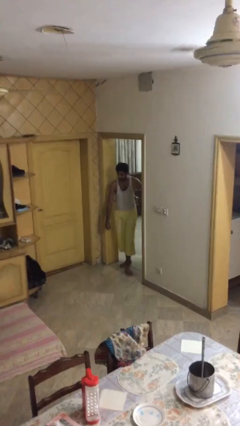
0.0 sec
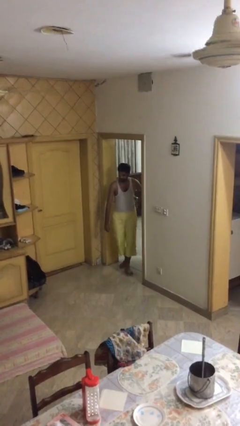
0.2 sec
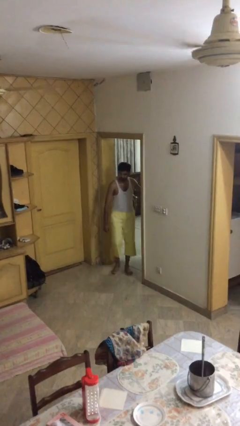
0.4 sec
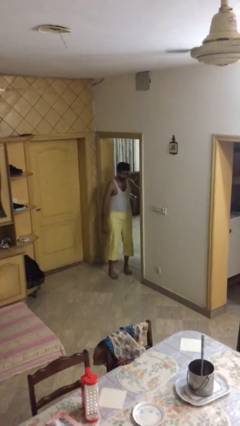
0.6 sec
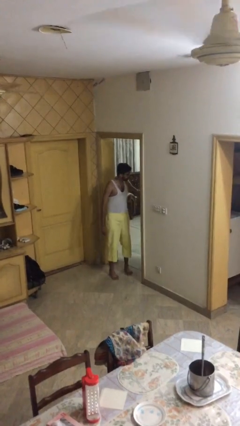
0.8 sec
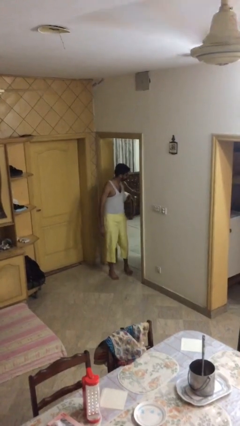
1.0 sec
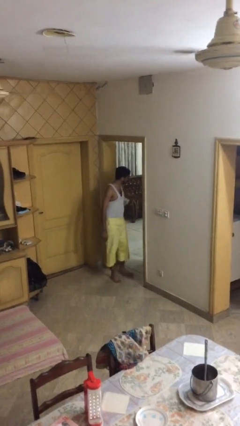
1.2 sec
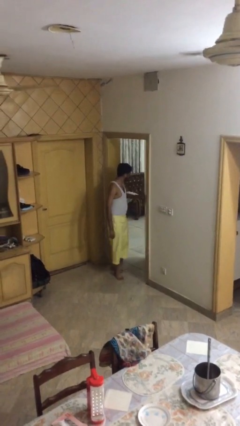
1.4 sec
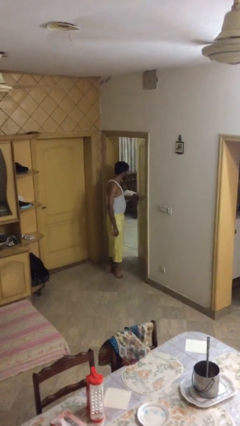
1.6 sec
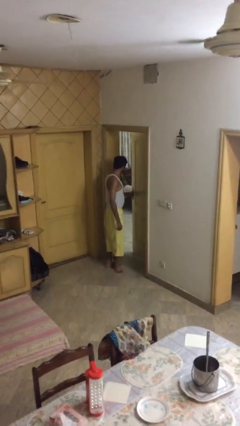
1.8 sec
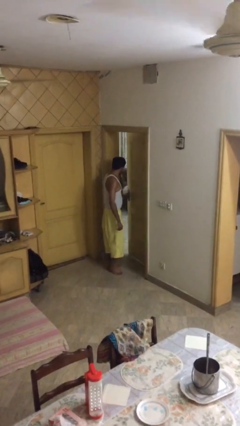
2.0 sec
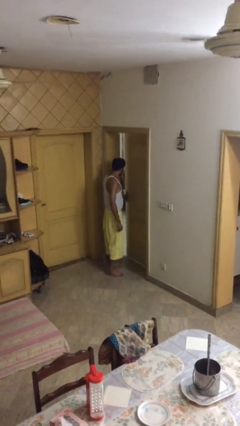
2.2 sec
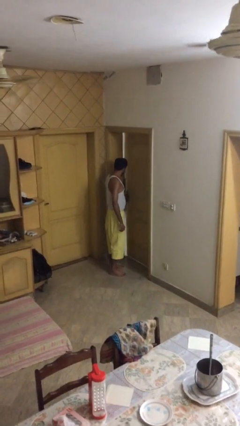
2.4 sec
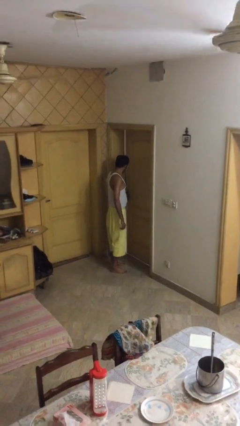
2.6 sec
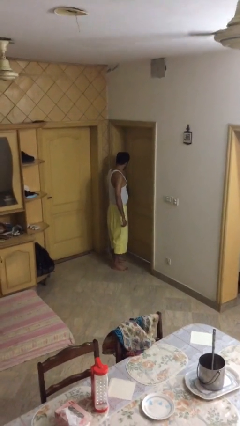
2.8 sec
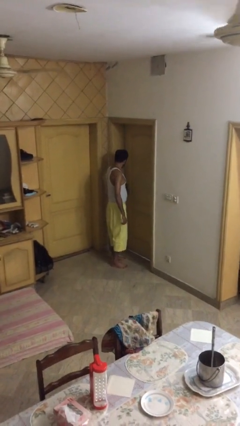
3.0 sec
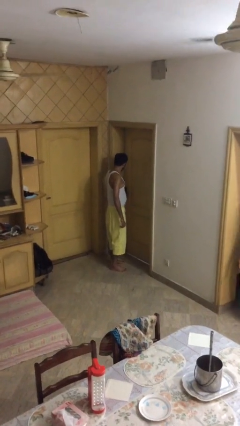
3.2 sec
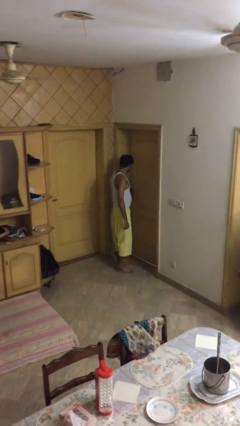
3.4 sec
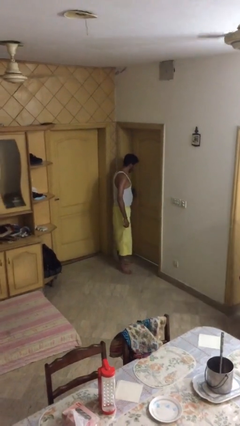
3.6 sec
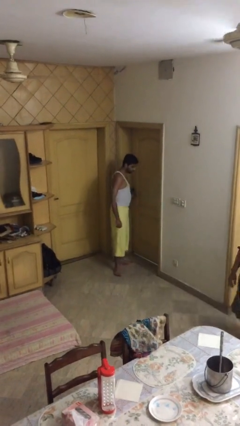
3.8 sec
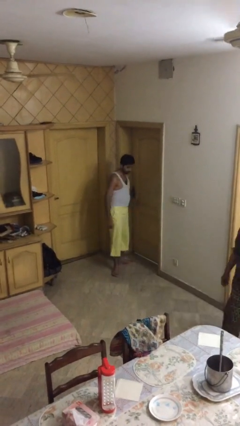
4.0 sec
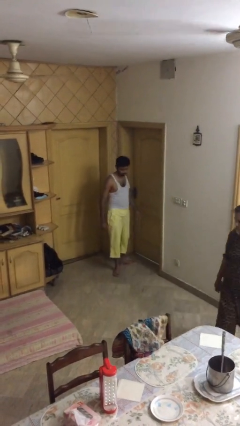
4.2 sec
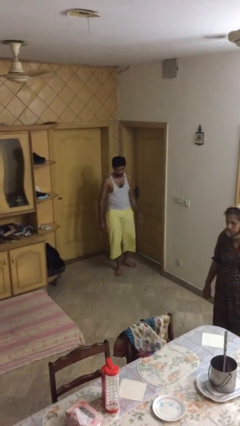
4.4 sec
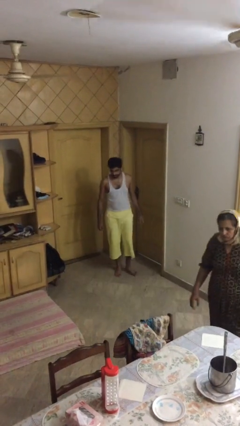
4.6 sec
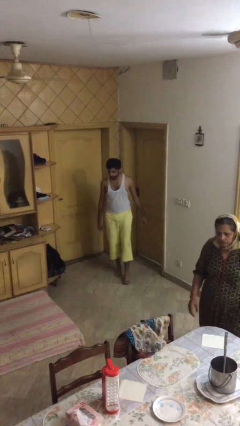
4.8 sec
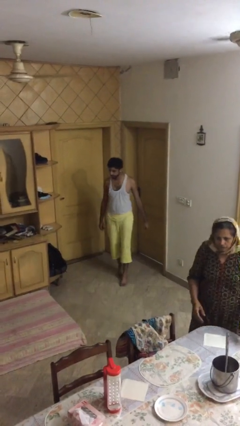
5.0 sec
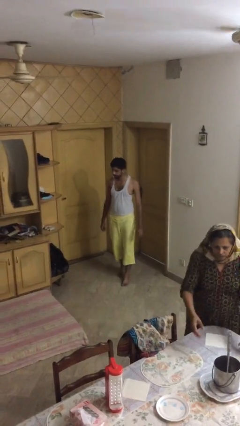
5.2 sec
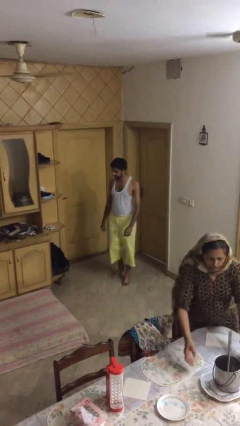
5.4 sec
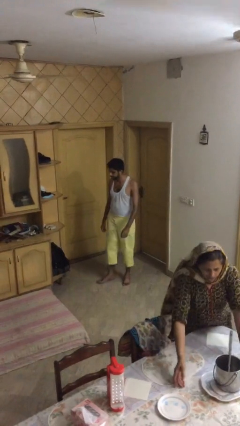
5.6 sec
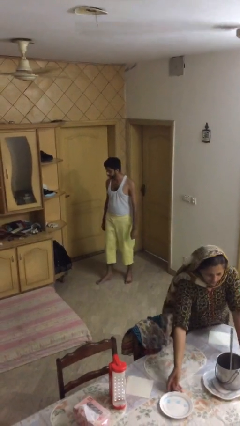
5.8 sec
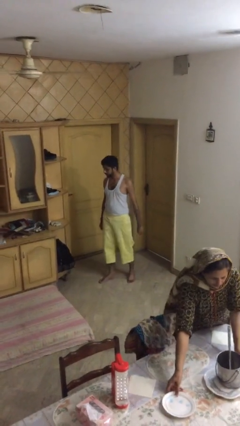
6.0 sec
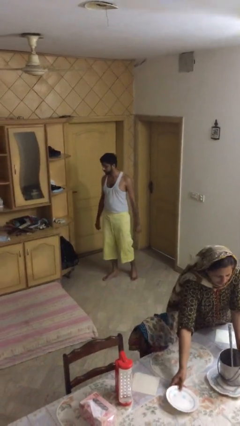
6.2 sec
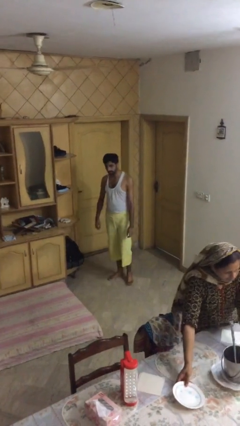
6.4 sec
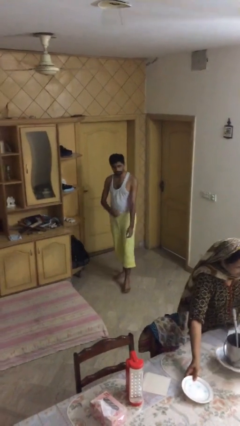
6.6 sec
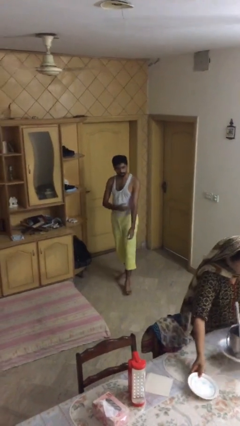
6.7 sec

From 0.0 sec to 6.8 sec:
person closes facility door

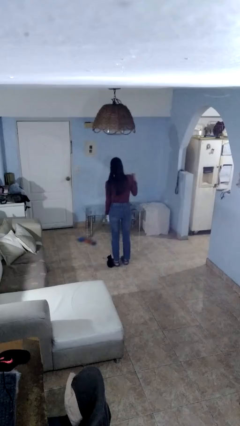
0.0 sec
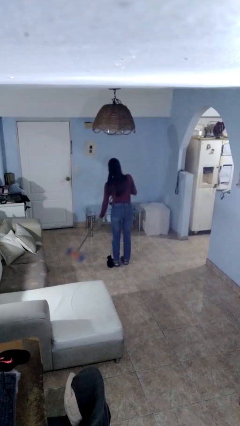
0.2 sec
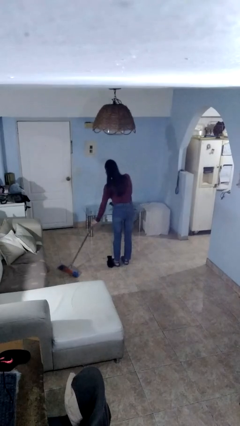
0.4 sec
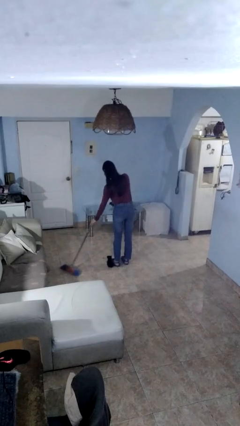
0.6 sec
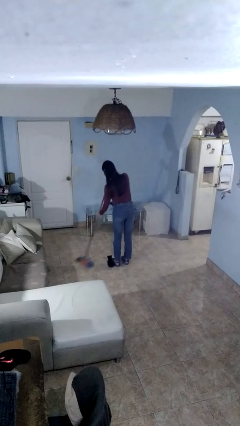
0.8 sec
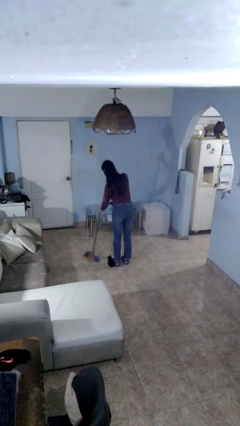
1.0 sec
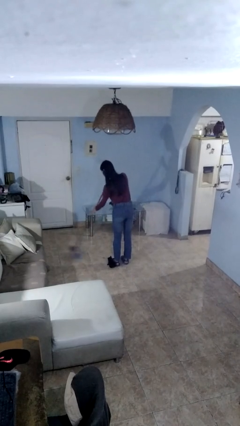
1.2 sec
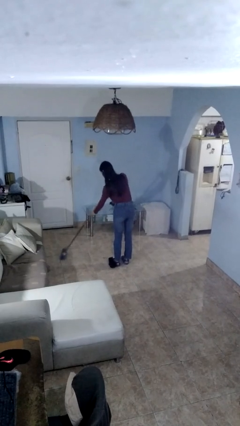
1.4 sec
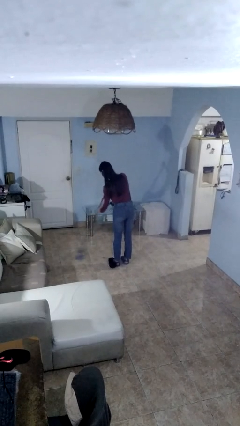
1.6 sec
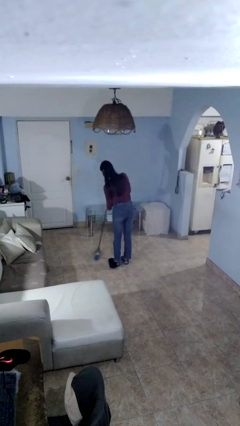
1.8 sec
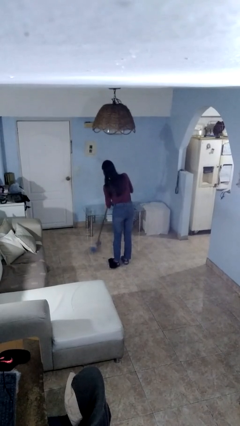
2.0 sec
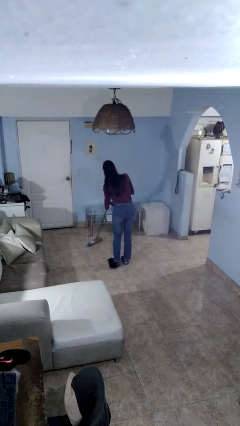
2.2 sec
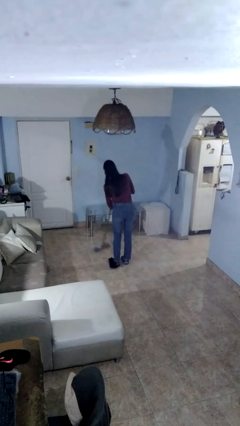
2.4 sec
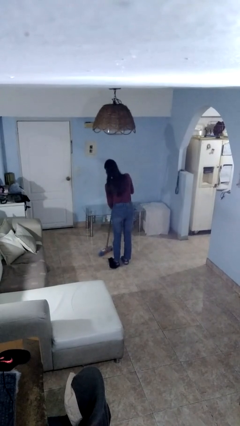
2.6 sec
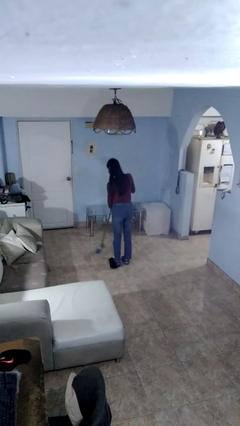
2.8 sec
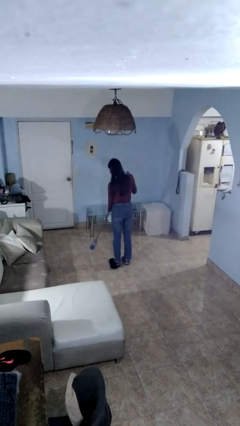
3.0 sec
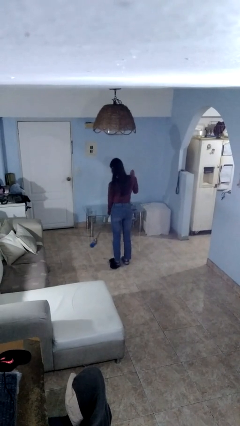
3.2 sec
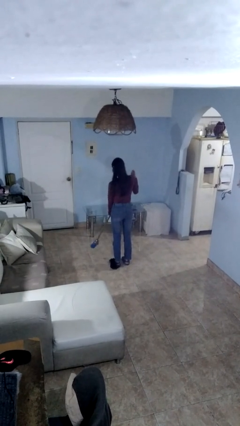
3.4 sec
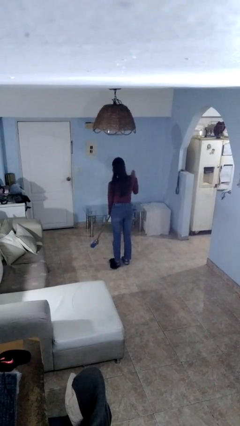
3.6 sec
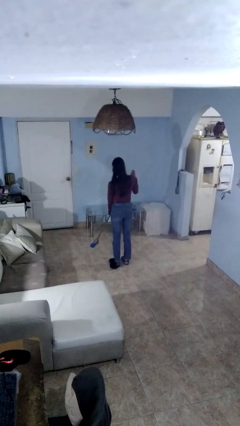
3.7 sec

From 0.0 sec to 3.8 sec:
person sweeps floor

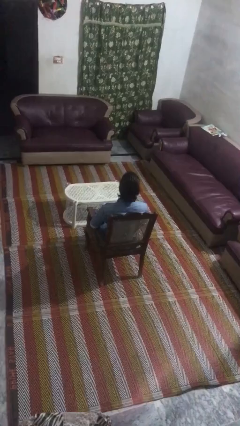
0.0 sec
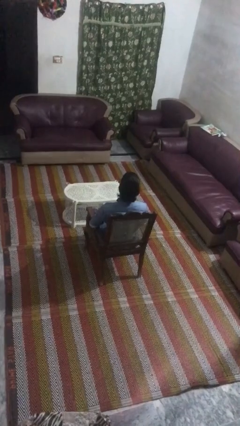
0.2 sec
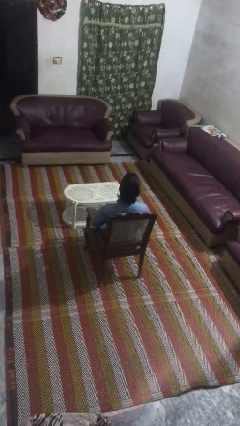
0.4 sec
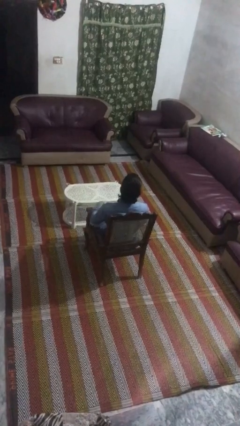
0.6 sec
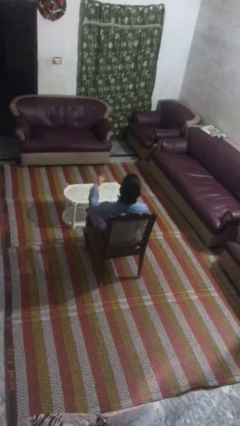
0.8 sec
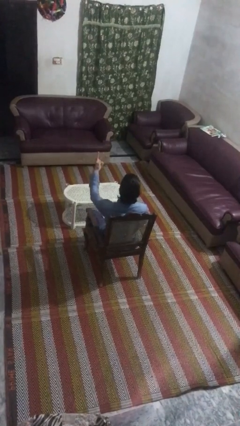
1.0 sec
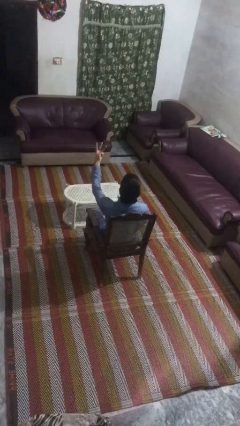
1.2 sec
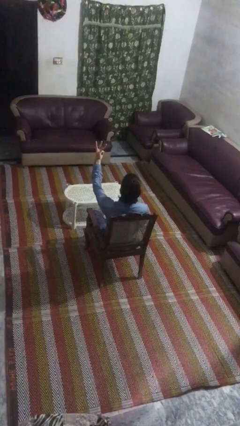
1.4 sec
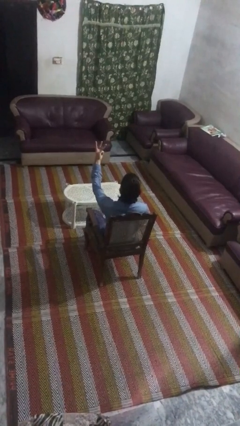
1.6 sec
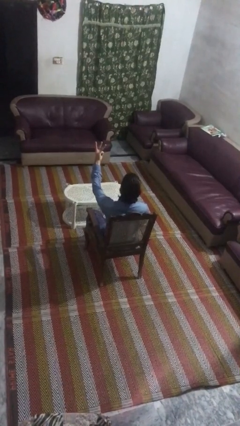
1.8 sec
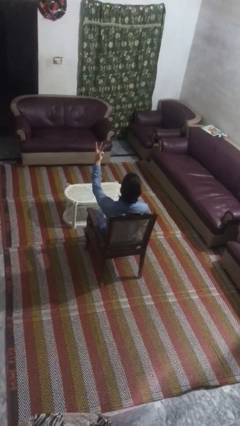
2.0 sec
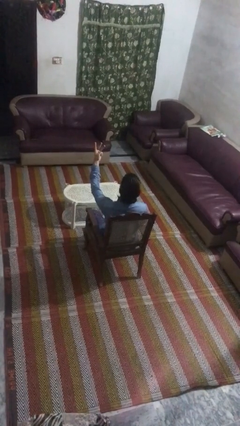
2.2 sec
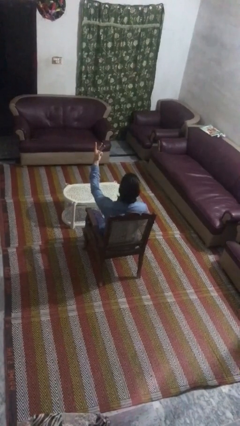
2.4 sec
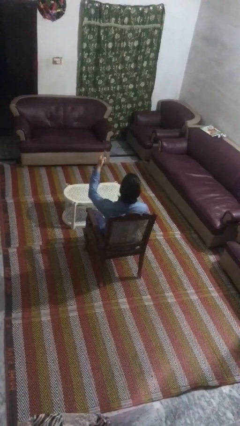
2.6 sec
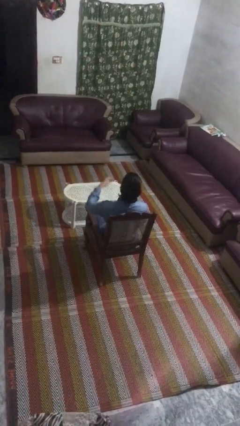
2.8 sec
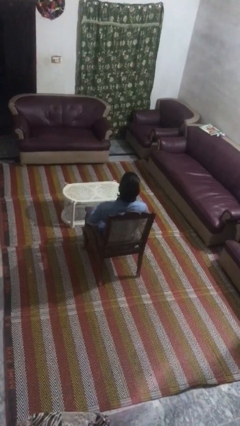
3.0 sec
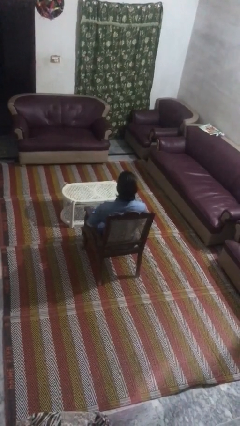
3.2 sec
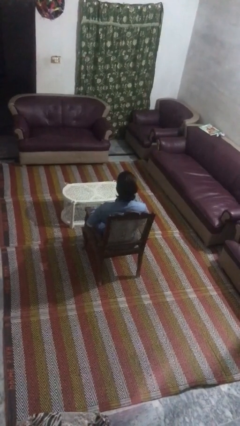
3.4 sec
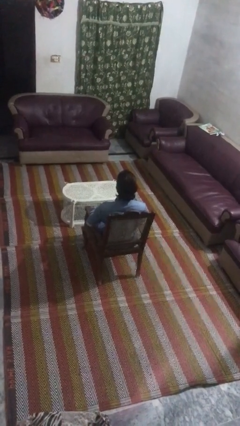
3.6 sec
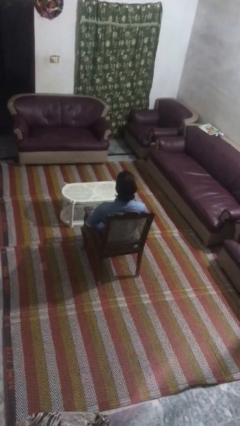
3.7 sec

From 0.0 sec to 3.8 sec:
person gestures number three

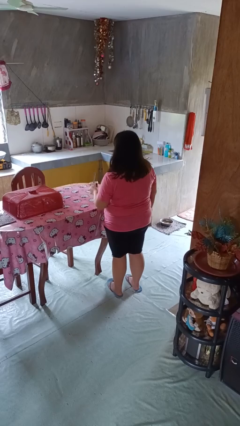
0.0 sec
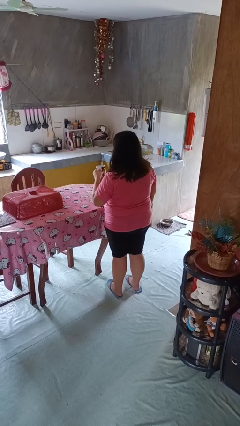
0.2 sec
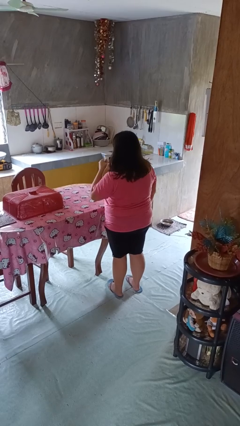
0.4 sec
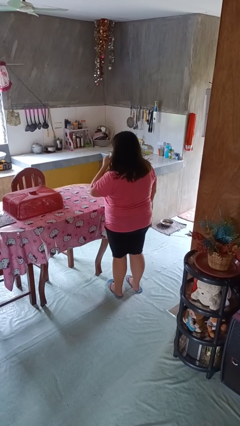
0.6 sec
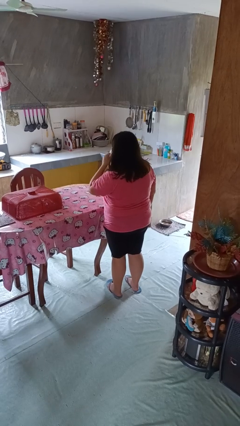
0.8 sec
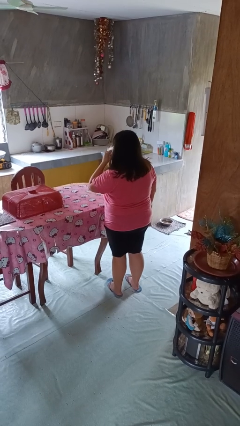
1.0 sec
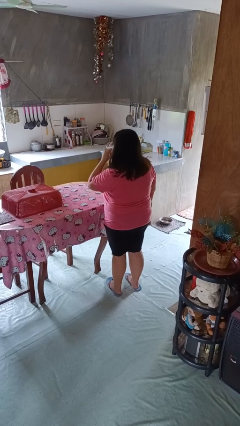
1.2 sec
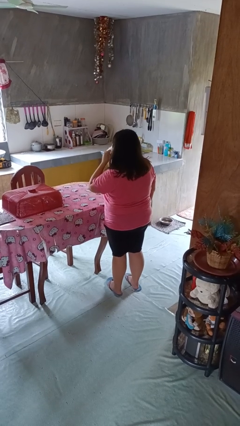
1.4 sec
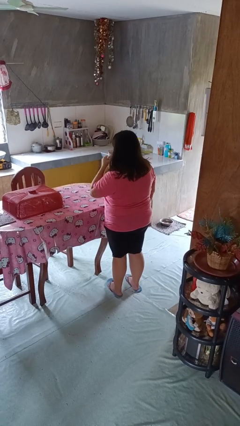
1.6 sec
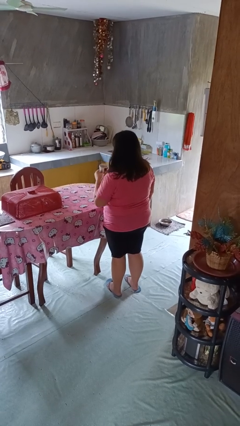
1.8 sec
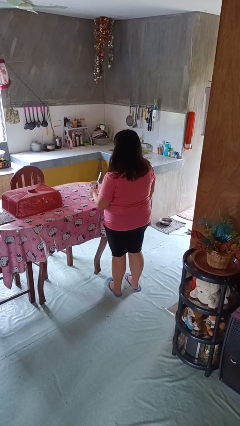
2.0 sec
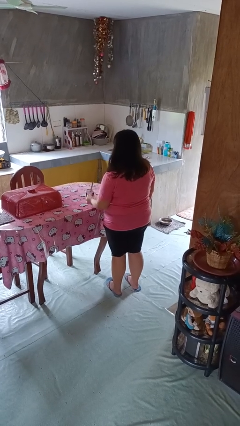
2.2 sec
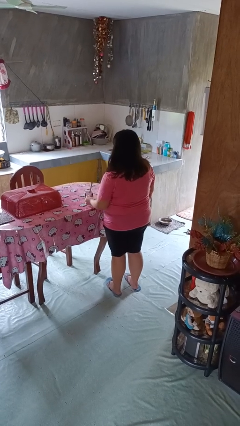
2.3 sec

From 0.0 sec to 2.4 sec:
person drinks from mug

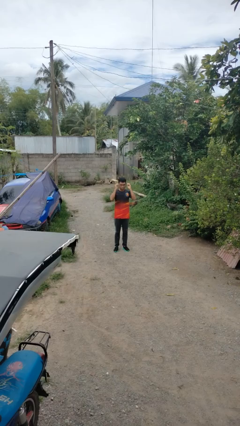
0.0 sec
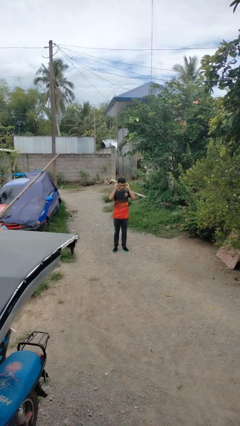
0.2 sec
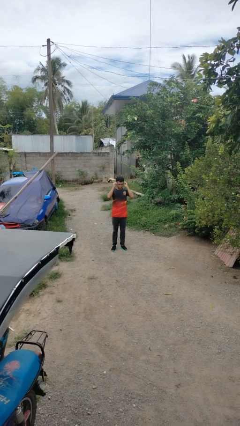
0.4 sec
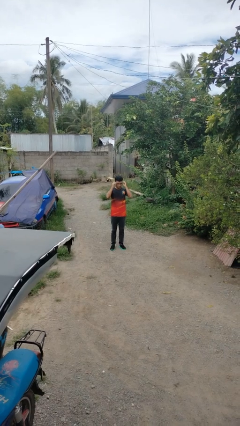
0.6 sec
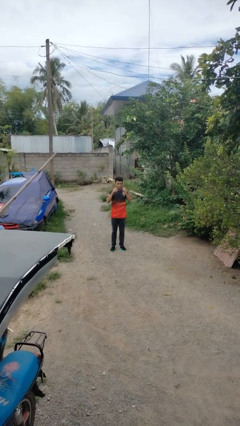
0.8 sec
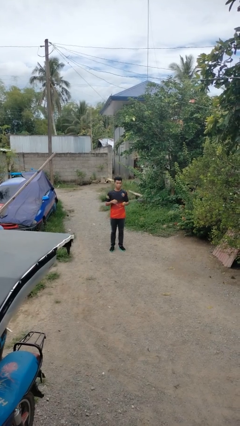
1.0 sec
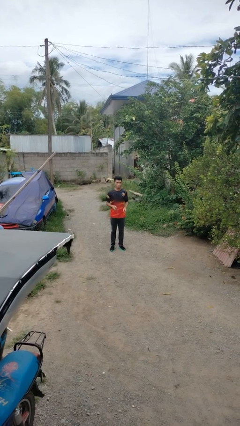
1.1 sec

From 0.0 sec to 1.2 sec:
person takes off glasses
